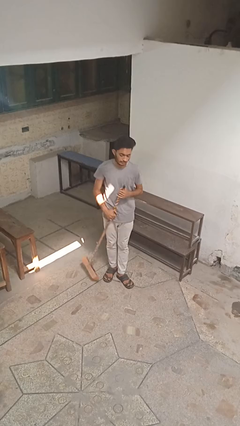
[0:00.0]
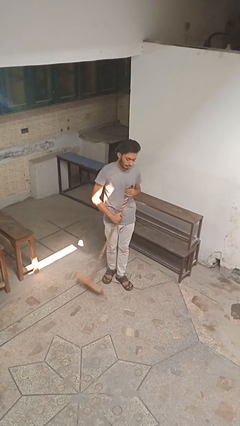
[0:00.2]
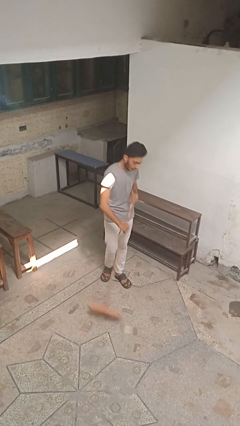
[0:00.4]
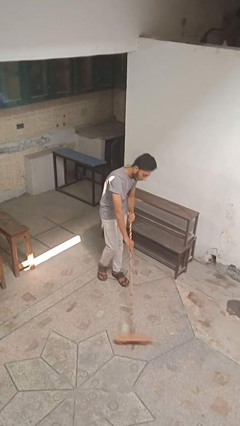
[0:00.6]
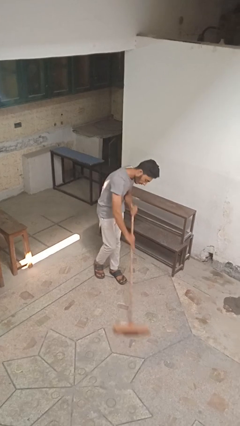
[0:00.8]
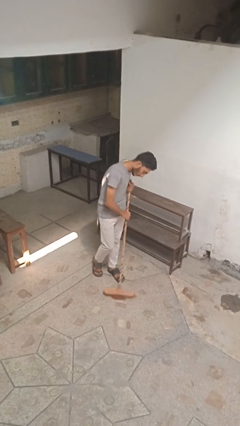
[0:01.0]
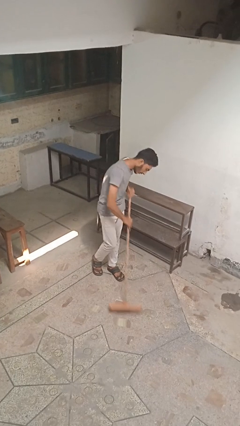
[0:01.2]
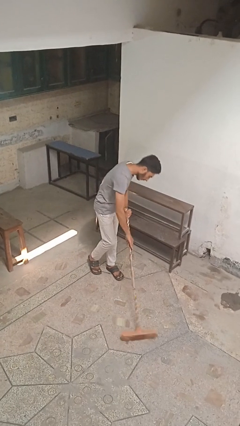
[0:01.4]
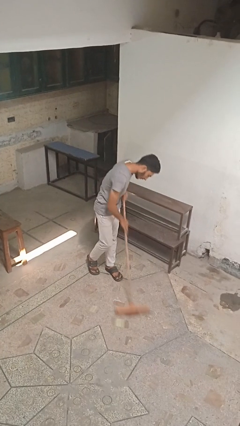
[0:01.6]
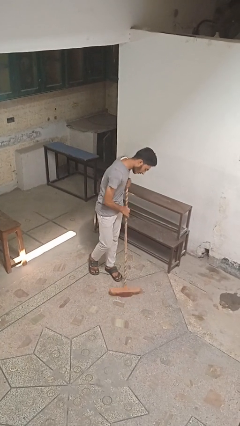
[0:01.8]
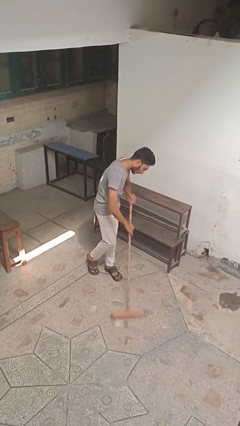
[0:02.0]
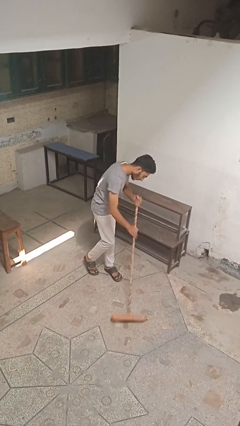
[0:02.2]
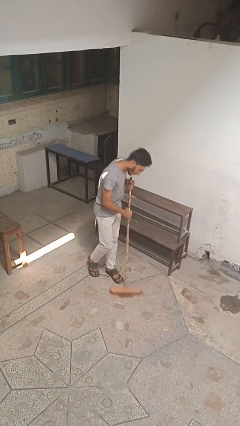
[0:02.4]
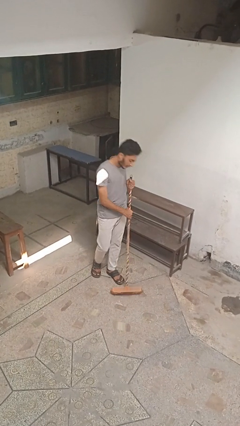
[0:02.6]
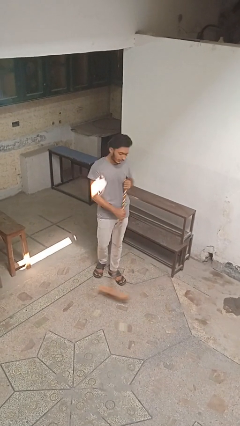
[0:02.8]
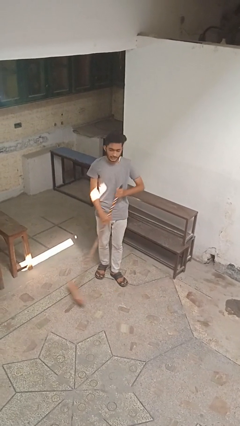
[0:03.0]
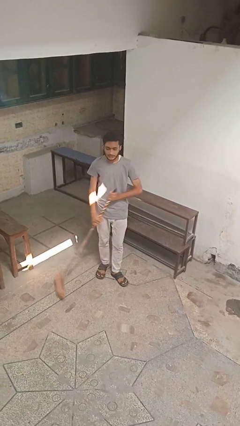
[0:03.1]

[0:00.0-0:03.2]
person sweeps floor

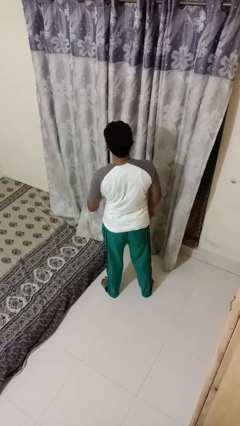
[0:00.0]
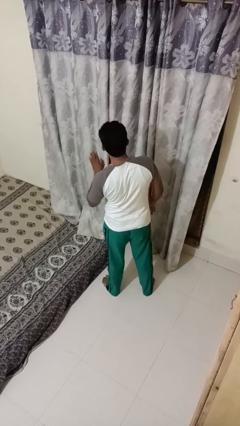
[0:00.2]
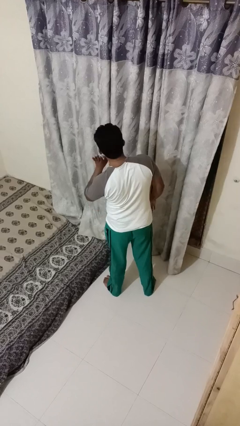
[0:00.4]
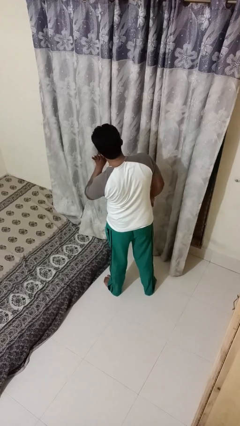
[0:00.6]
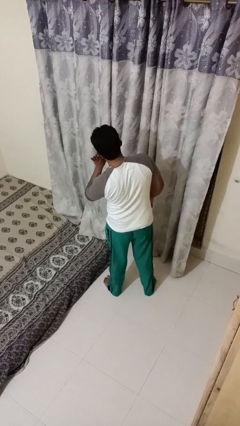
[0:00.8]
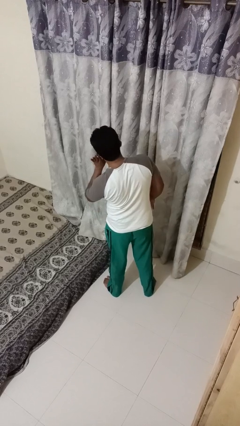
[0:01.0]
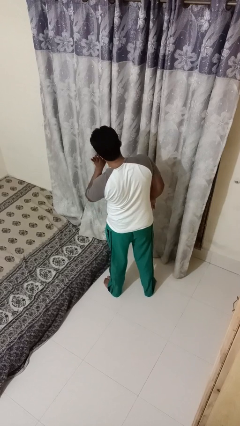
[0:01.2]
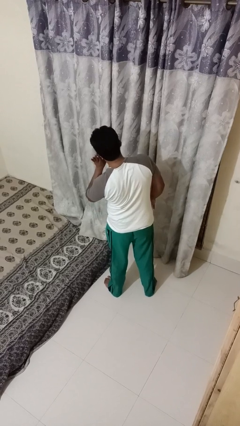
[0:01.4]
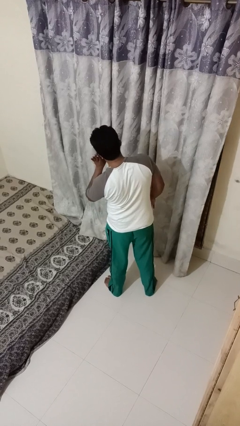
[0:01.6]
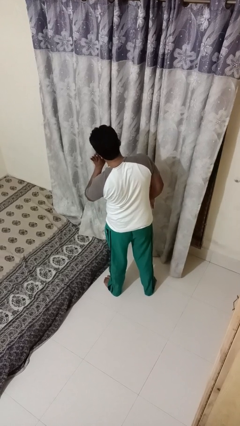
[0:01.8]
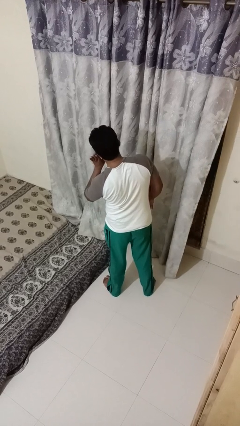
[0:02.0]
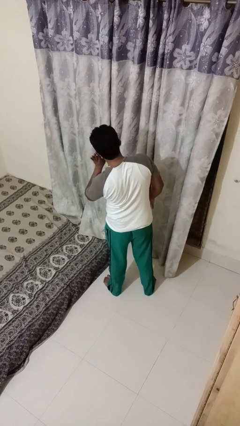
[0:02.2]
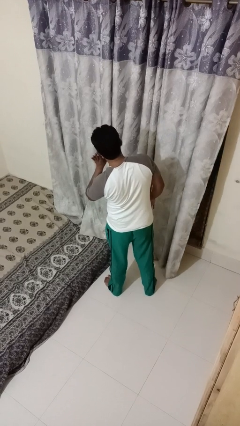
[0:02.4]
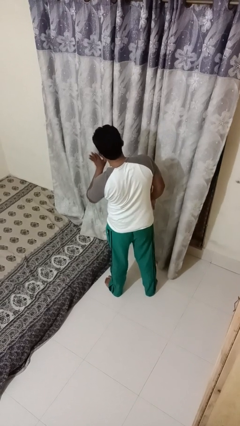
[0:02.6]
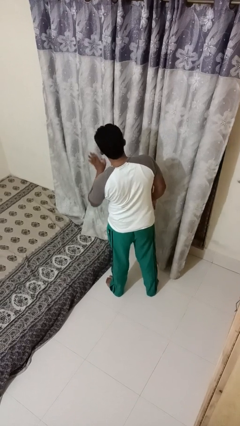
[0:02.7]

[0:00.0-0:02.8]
person gestures listen closely

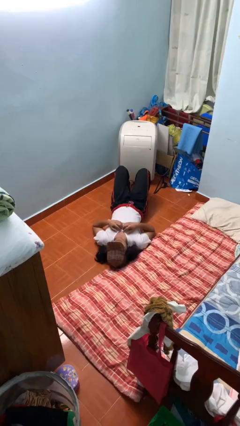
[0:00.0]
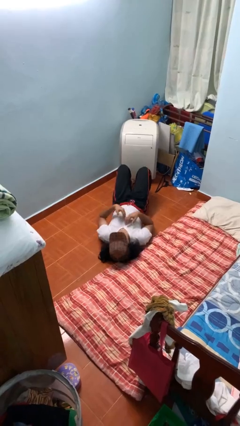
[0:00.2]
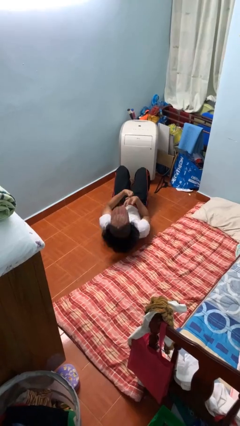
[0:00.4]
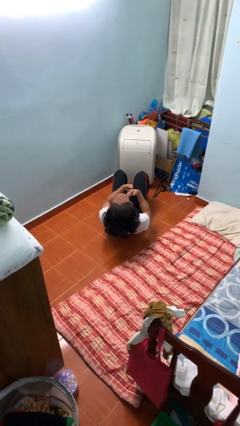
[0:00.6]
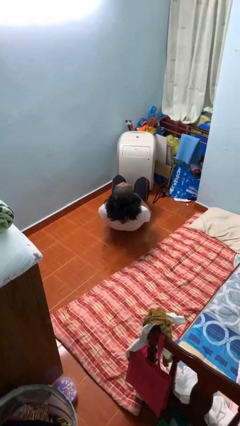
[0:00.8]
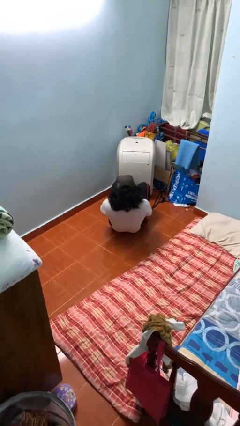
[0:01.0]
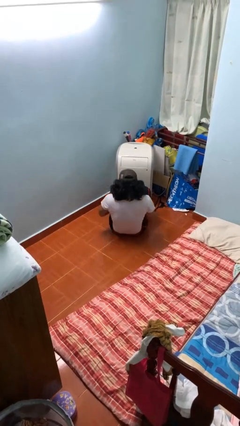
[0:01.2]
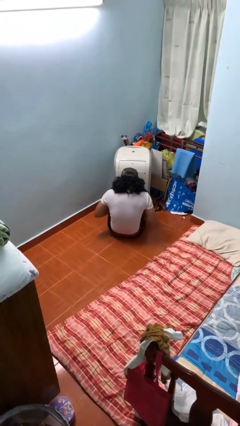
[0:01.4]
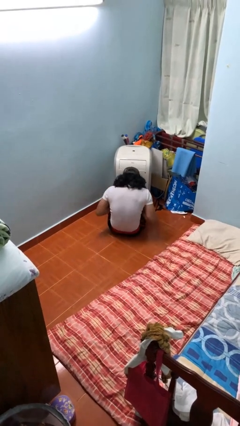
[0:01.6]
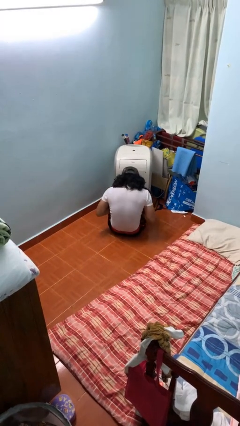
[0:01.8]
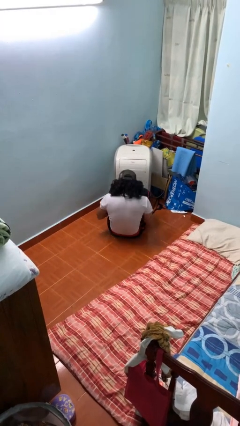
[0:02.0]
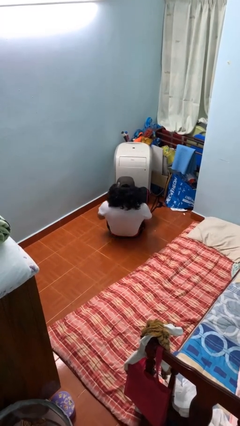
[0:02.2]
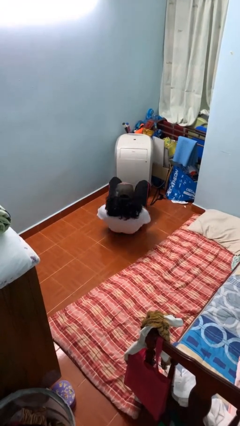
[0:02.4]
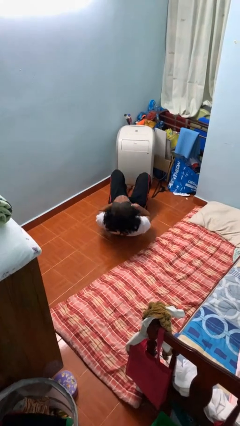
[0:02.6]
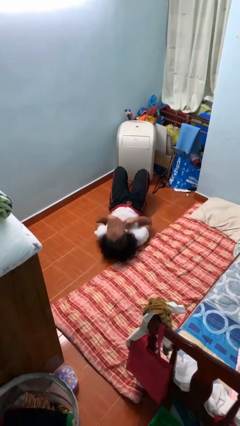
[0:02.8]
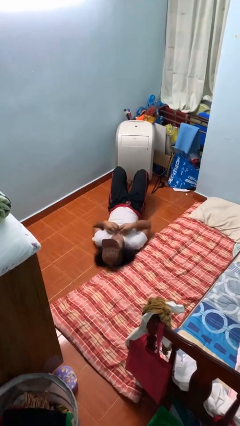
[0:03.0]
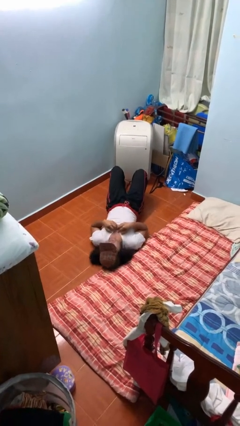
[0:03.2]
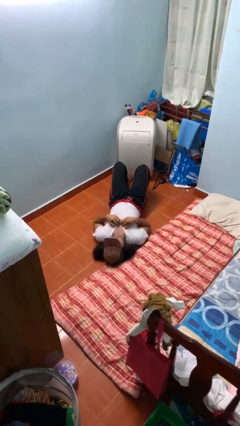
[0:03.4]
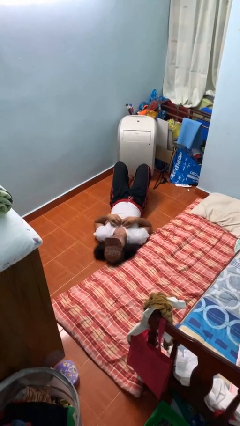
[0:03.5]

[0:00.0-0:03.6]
person exercises with situp

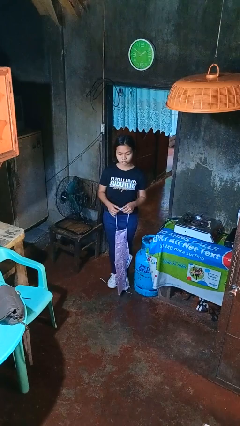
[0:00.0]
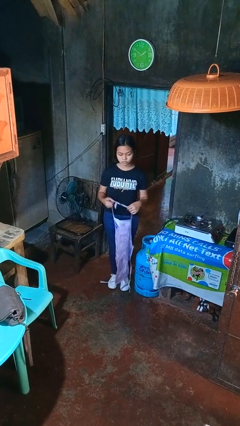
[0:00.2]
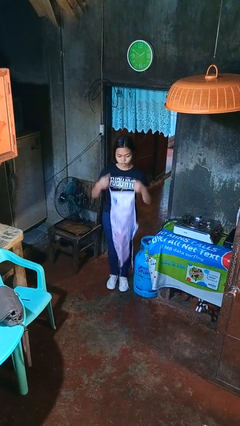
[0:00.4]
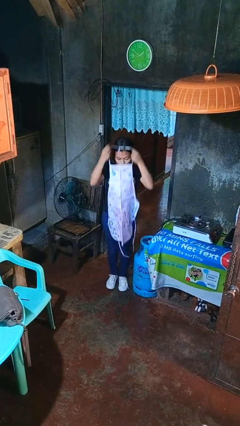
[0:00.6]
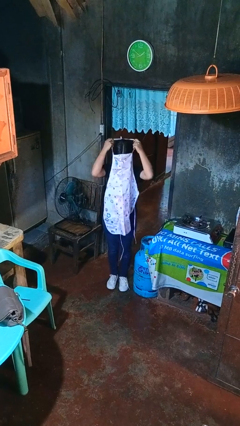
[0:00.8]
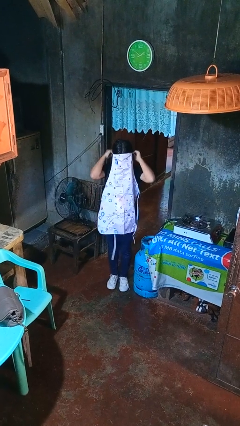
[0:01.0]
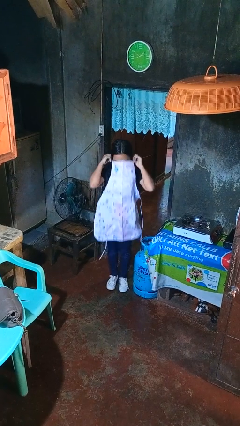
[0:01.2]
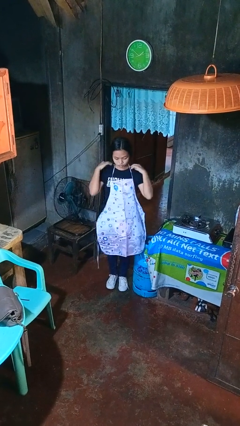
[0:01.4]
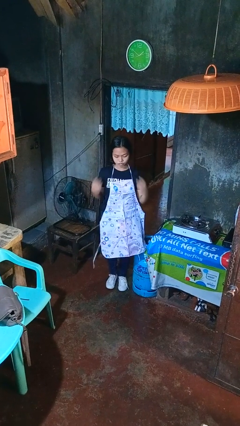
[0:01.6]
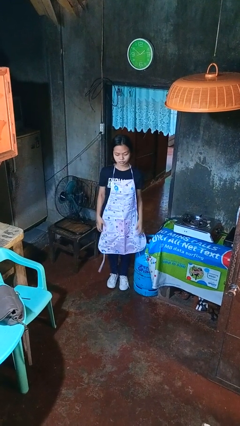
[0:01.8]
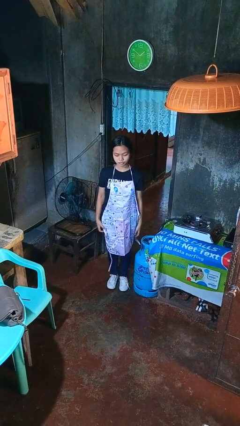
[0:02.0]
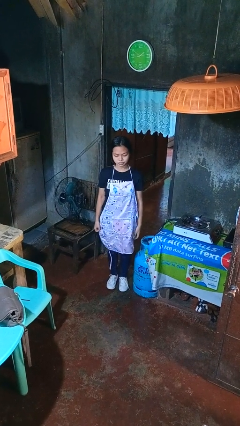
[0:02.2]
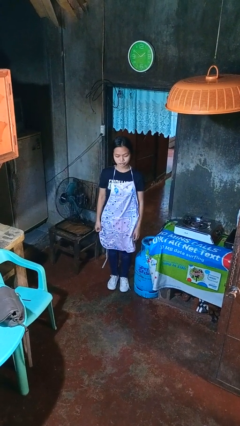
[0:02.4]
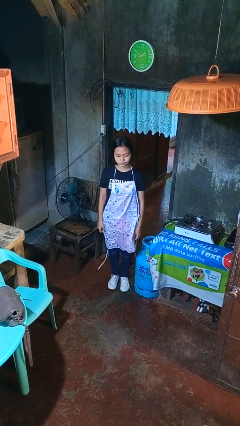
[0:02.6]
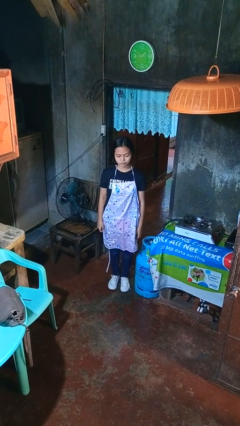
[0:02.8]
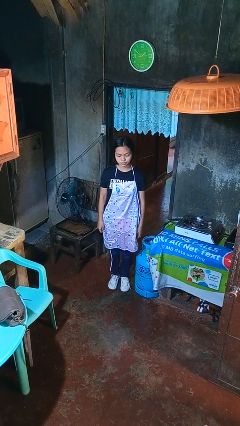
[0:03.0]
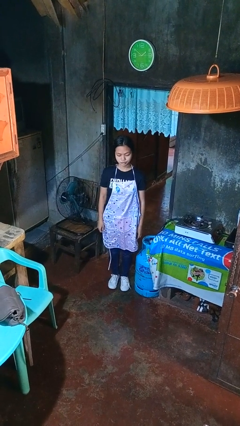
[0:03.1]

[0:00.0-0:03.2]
person puts on apron

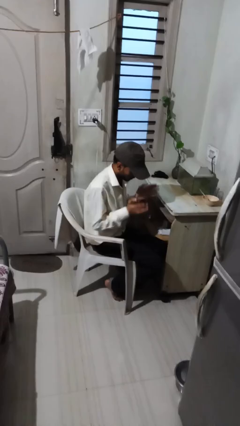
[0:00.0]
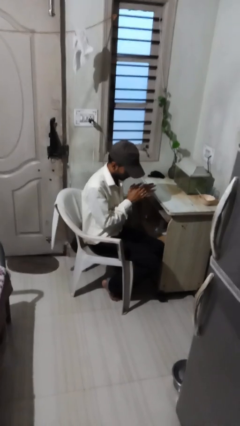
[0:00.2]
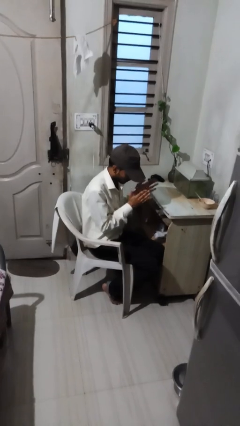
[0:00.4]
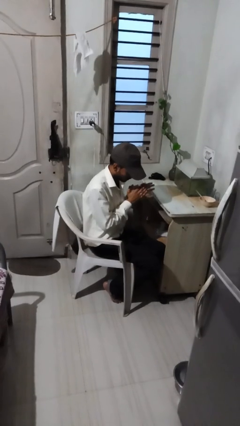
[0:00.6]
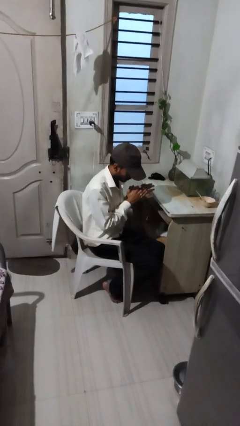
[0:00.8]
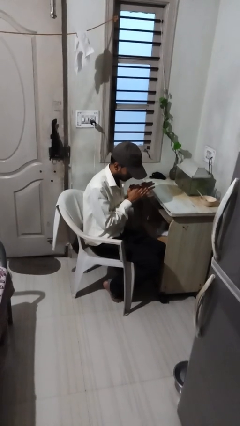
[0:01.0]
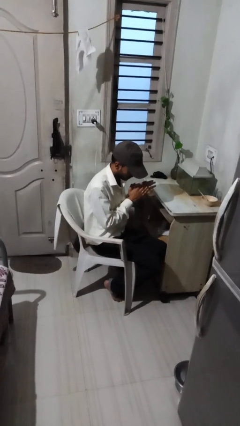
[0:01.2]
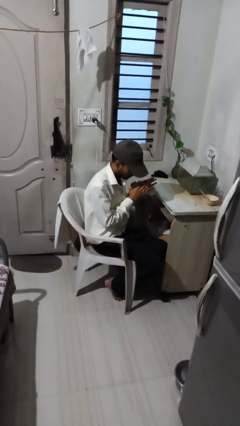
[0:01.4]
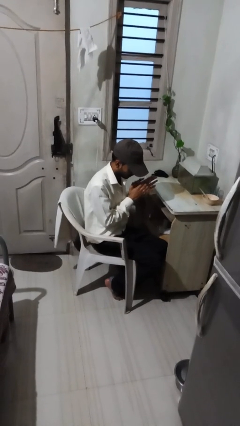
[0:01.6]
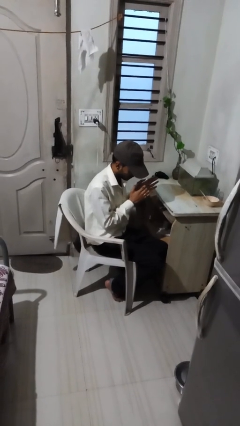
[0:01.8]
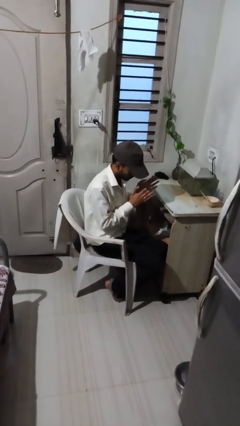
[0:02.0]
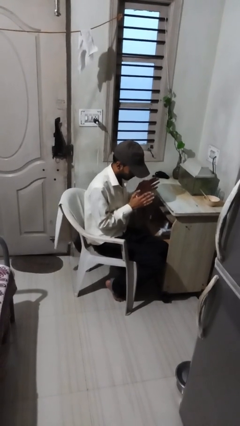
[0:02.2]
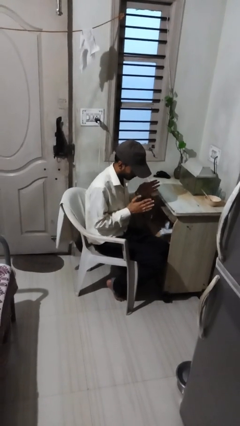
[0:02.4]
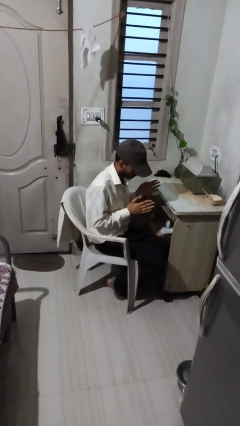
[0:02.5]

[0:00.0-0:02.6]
person claps hands

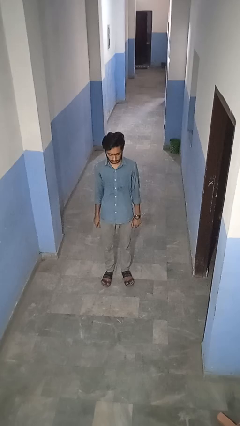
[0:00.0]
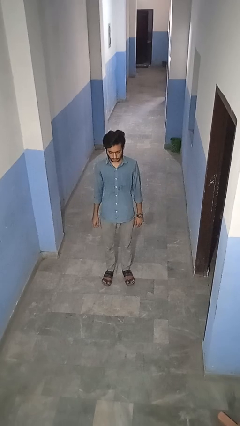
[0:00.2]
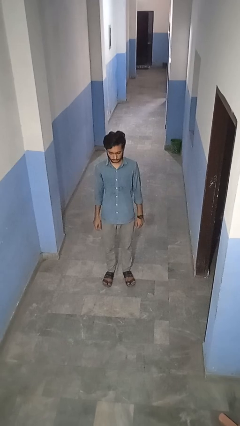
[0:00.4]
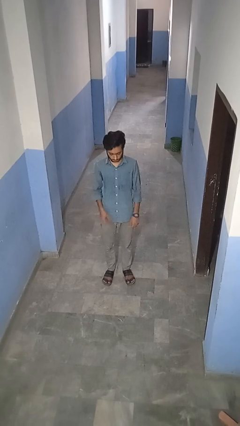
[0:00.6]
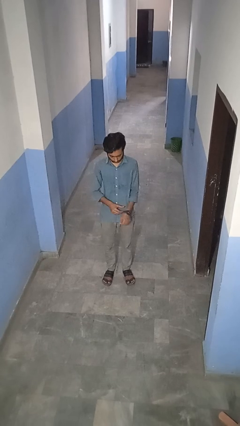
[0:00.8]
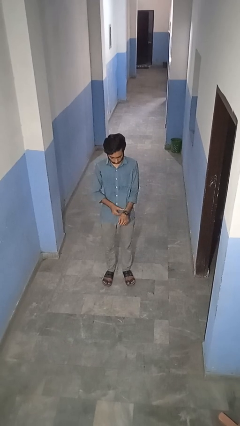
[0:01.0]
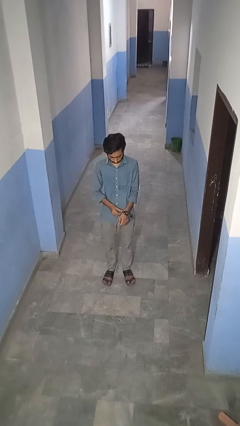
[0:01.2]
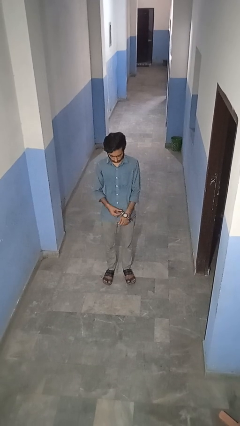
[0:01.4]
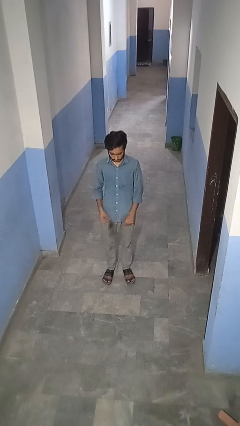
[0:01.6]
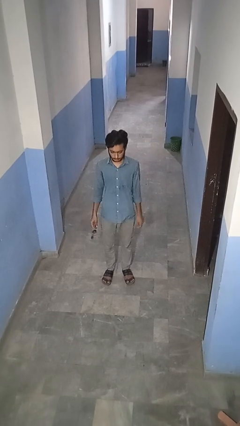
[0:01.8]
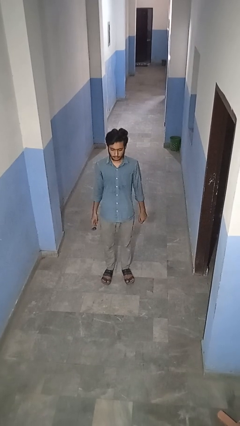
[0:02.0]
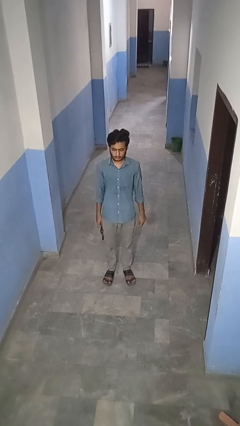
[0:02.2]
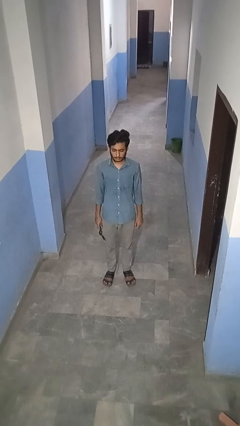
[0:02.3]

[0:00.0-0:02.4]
person takes off wristwatch
